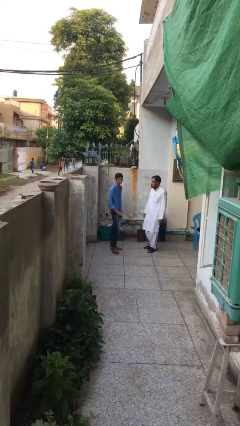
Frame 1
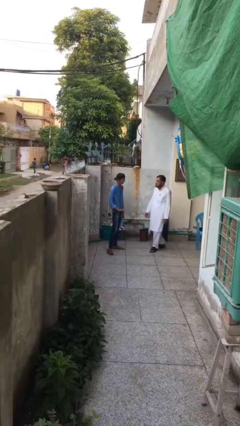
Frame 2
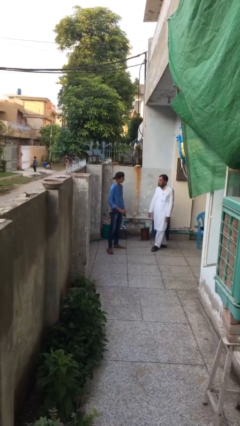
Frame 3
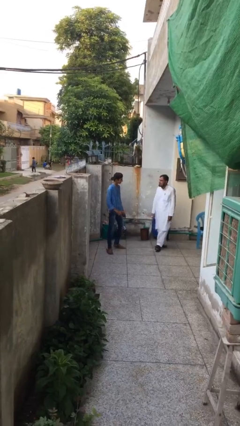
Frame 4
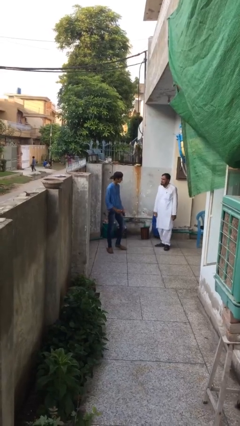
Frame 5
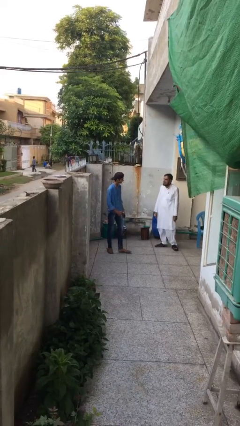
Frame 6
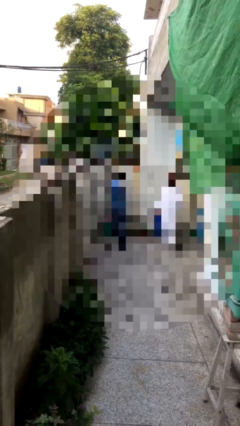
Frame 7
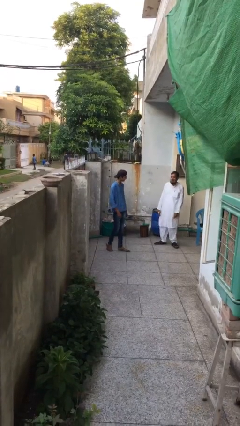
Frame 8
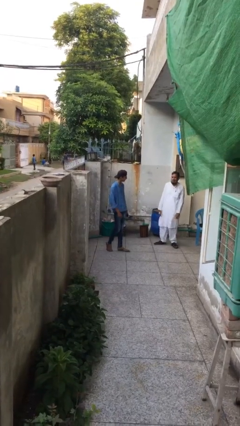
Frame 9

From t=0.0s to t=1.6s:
person talks to person

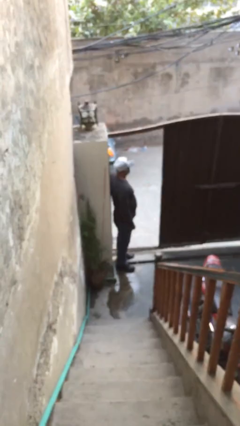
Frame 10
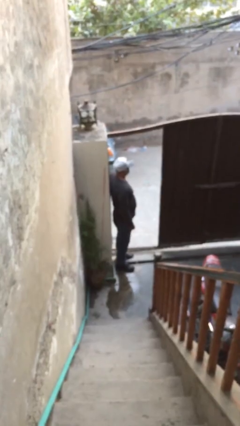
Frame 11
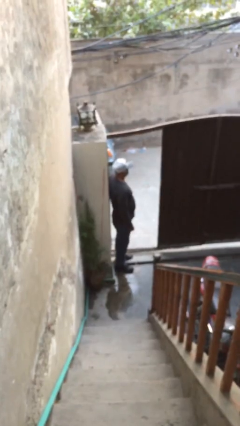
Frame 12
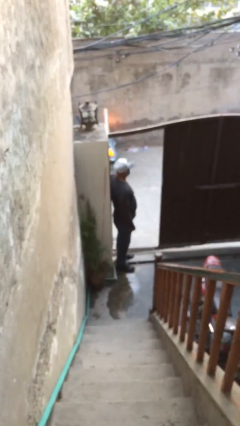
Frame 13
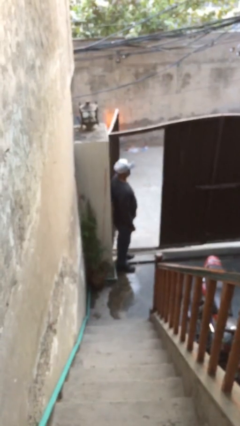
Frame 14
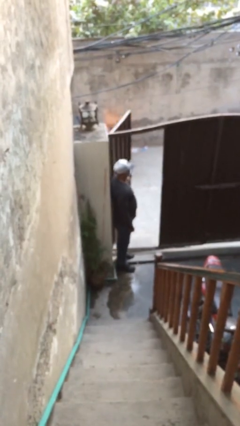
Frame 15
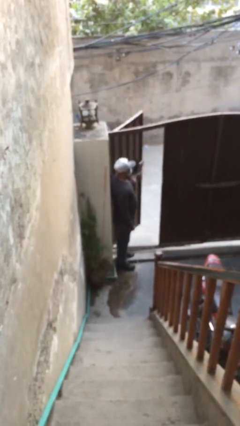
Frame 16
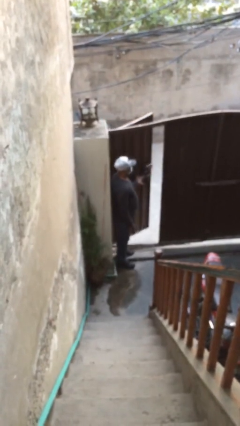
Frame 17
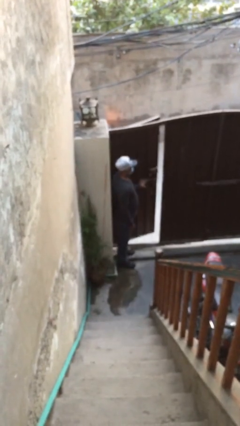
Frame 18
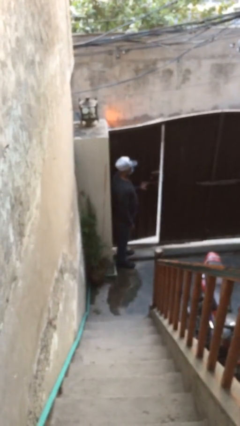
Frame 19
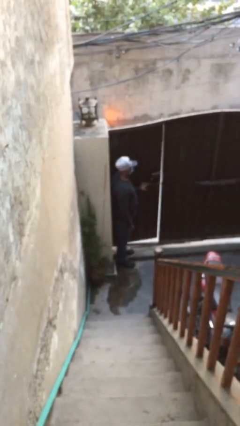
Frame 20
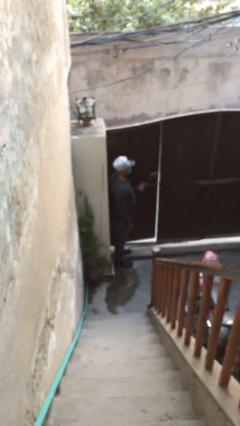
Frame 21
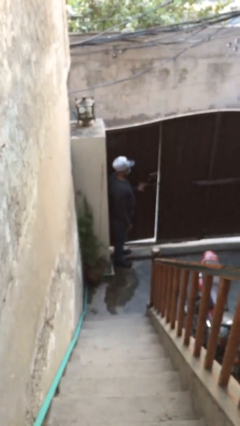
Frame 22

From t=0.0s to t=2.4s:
person closes facility door

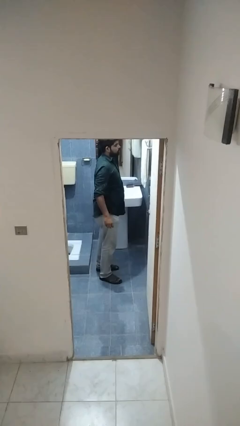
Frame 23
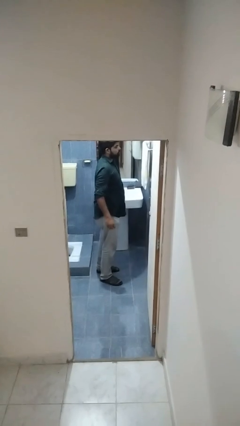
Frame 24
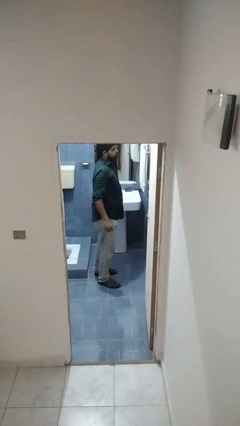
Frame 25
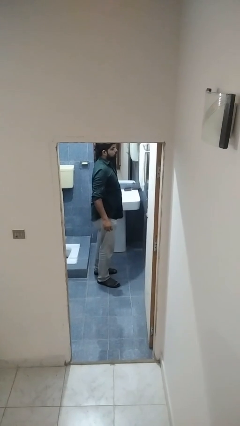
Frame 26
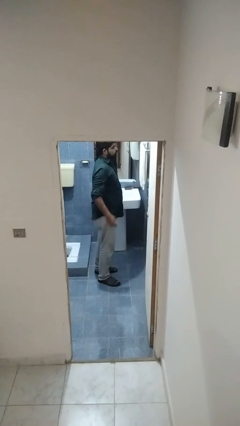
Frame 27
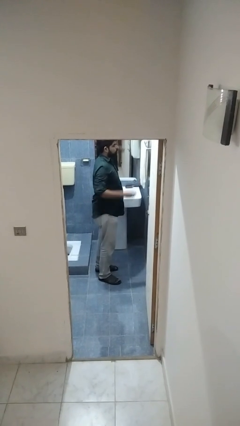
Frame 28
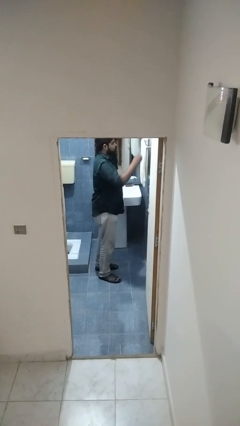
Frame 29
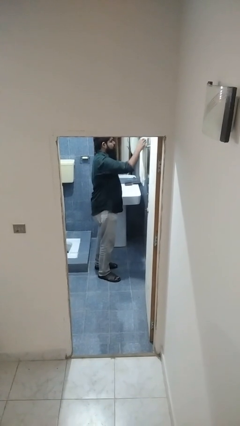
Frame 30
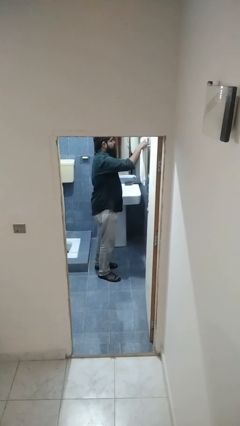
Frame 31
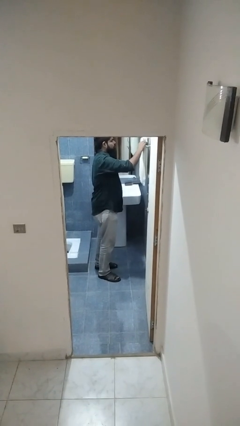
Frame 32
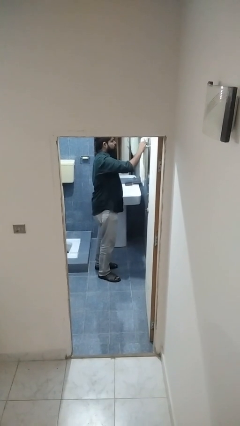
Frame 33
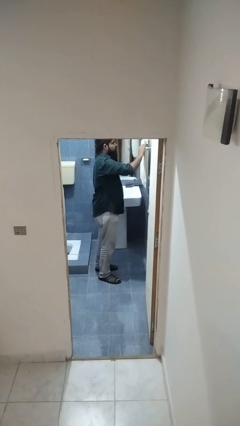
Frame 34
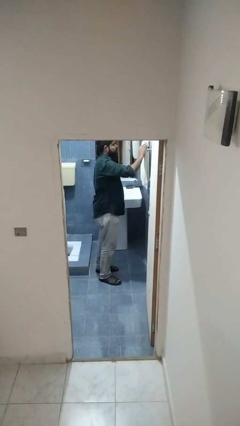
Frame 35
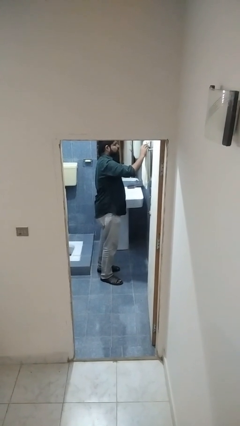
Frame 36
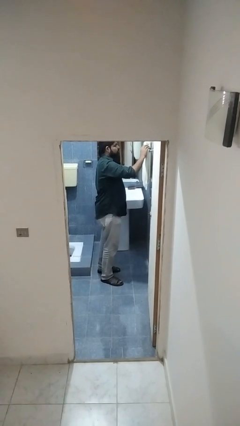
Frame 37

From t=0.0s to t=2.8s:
person puts down object on countertop

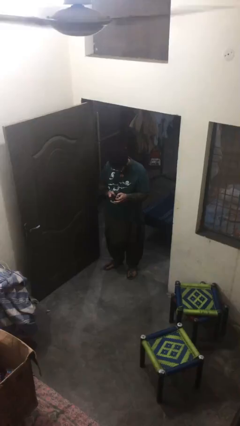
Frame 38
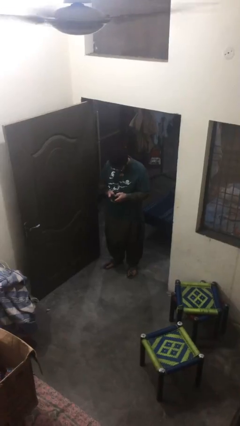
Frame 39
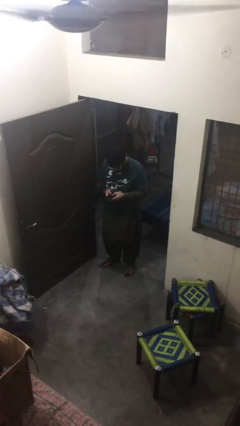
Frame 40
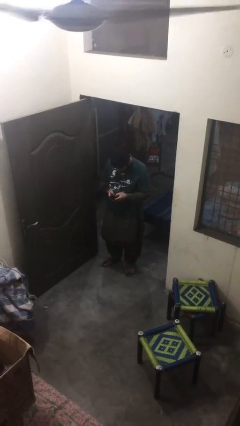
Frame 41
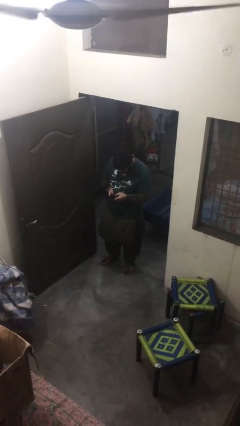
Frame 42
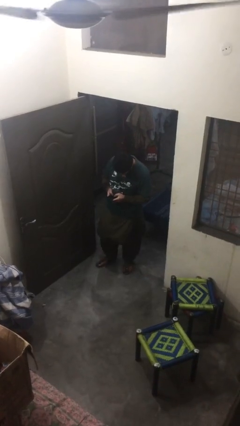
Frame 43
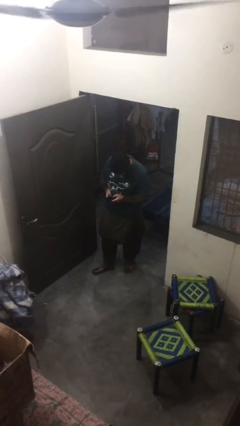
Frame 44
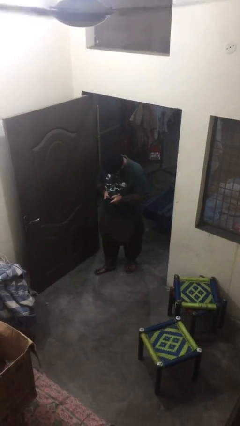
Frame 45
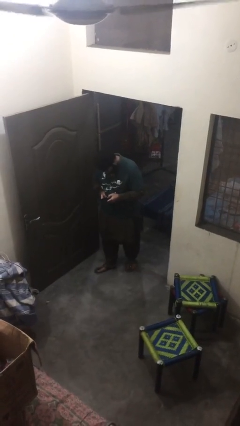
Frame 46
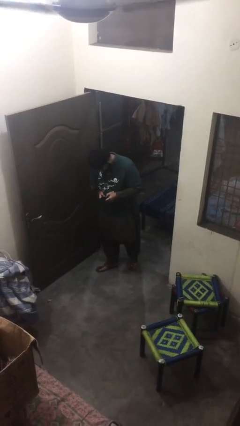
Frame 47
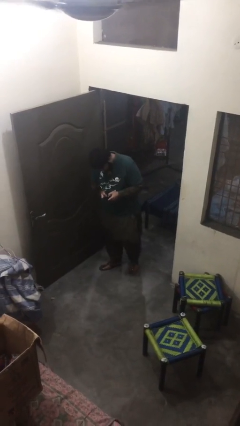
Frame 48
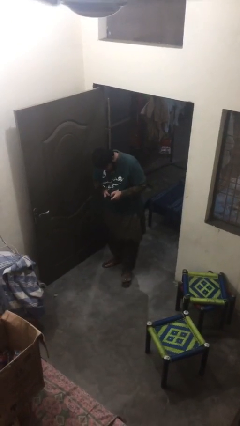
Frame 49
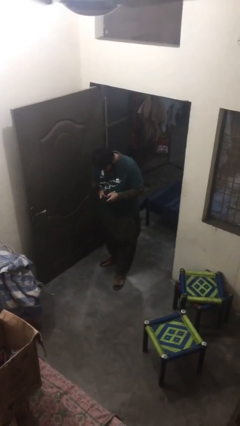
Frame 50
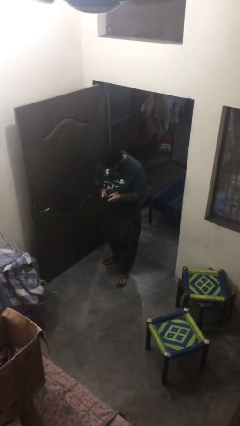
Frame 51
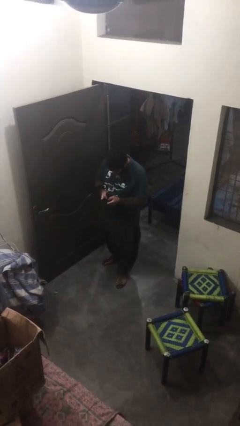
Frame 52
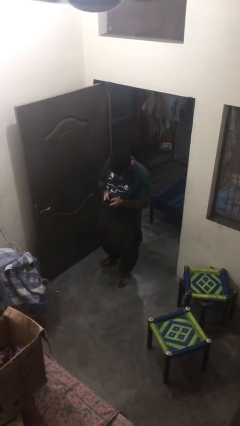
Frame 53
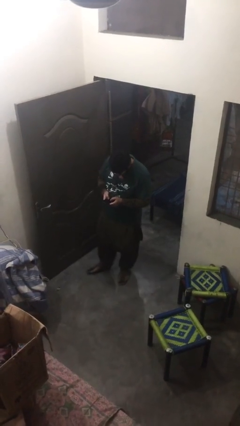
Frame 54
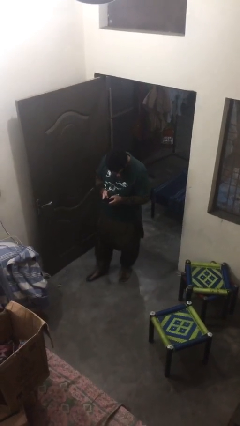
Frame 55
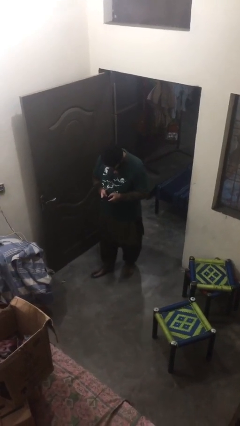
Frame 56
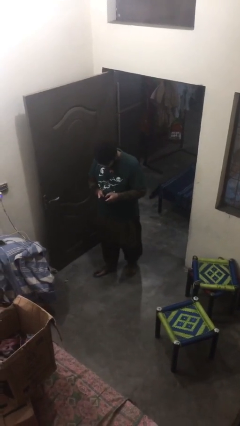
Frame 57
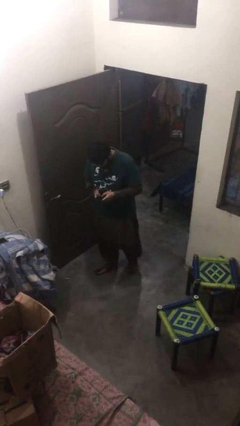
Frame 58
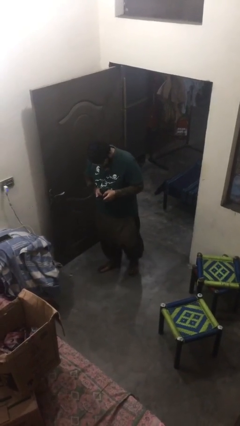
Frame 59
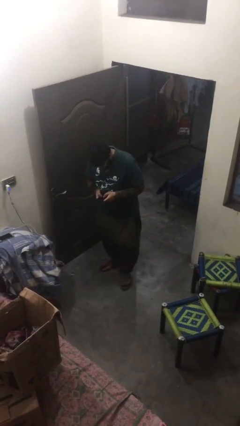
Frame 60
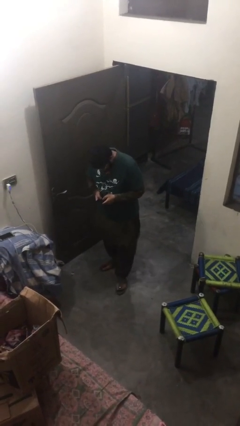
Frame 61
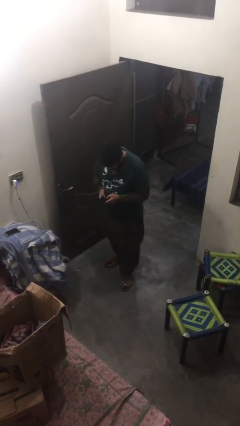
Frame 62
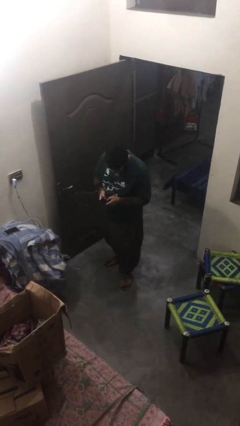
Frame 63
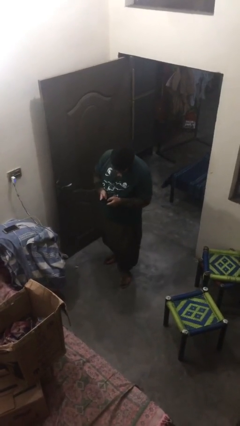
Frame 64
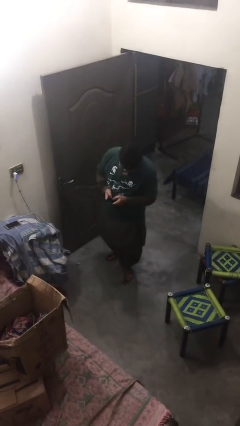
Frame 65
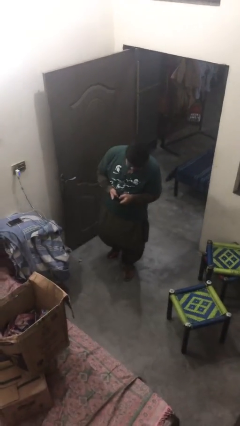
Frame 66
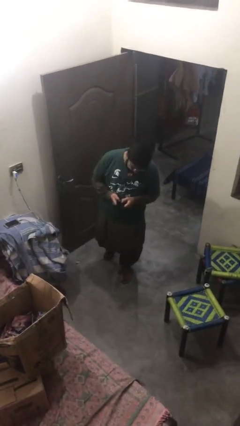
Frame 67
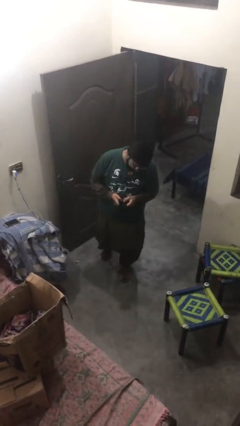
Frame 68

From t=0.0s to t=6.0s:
person texts on phone

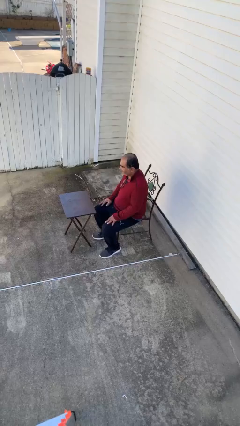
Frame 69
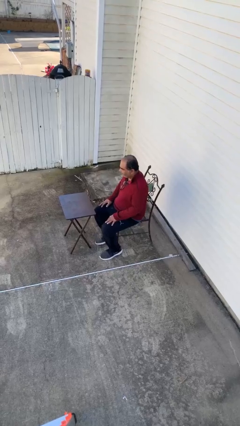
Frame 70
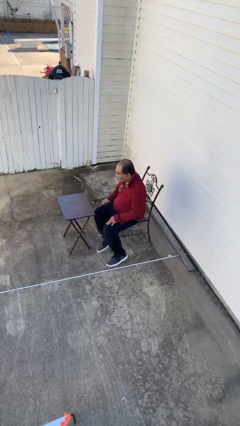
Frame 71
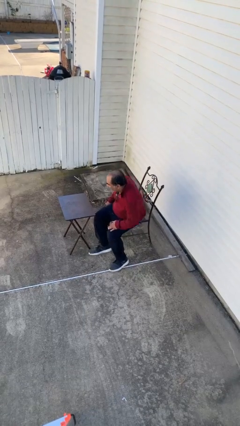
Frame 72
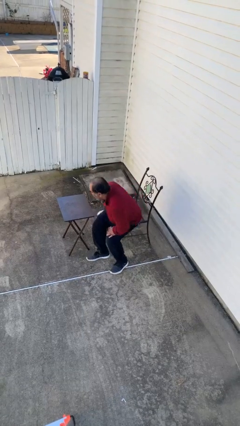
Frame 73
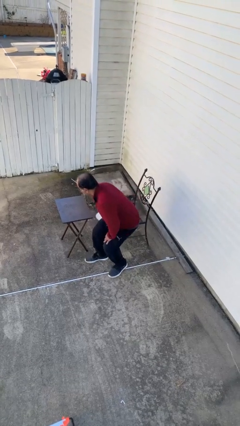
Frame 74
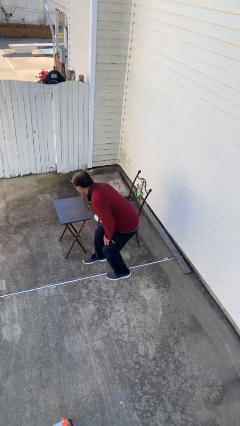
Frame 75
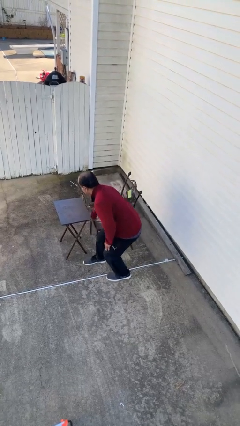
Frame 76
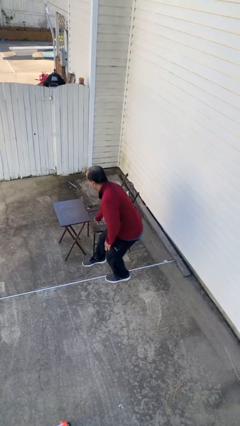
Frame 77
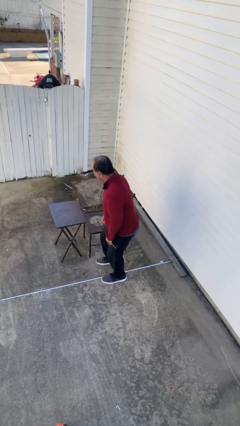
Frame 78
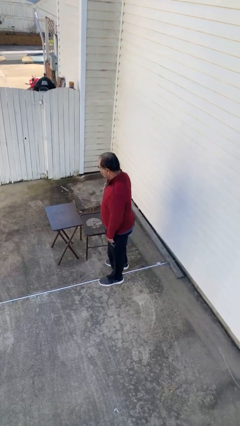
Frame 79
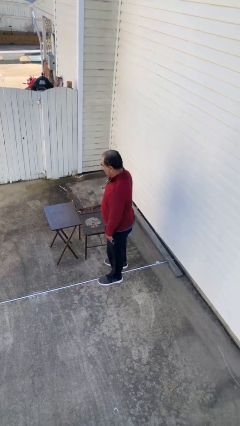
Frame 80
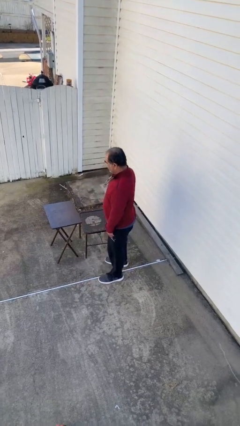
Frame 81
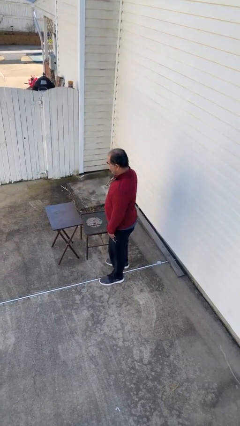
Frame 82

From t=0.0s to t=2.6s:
person stands up

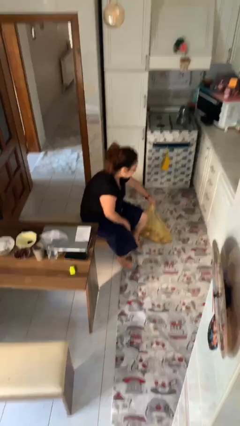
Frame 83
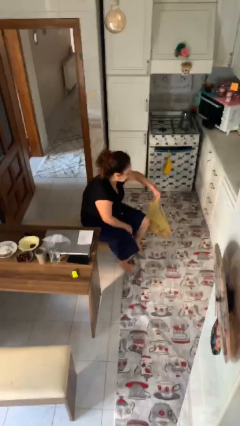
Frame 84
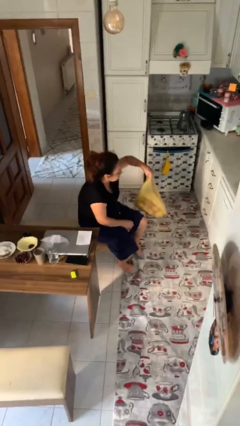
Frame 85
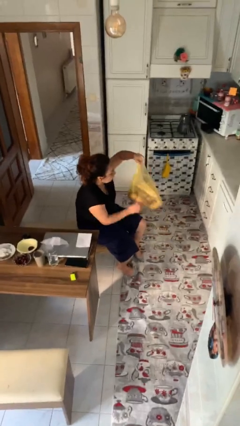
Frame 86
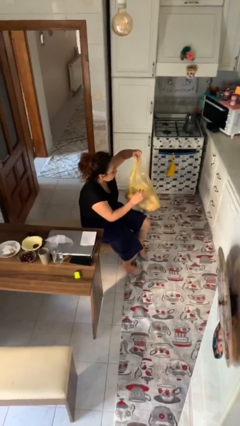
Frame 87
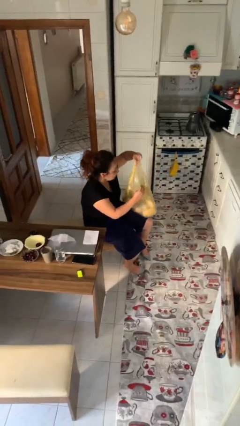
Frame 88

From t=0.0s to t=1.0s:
person picks up object from floor

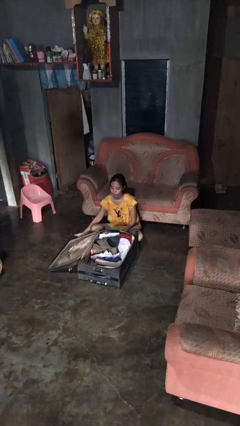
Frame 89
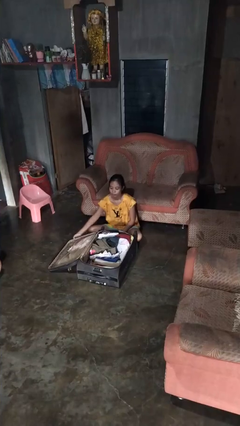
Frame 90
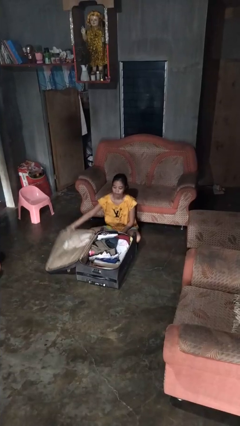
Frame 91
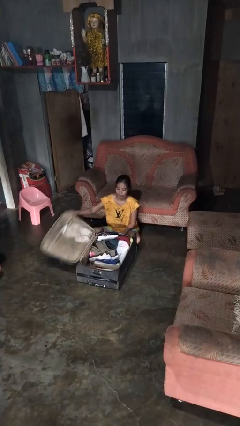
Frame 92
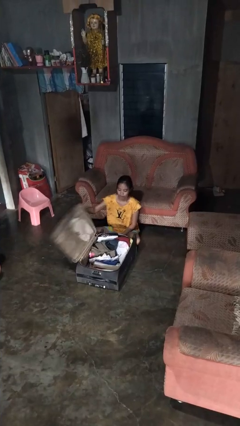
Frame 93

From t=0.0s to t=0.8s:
person closes suitcase
